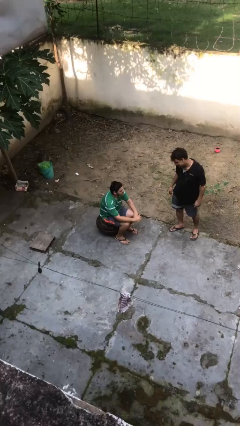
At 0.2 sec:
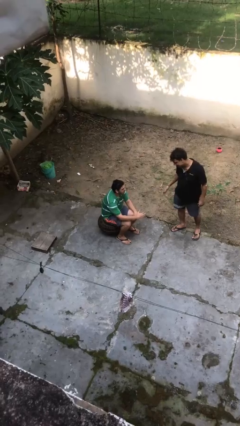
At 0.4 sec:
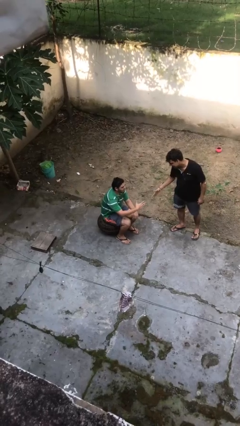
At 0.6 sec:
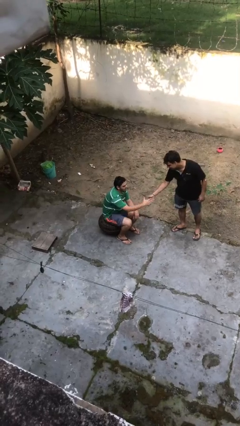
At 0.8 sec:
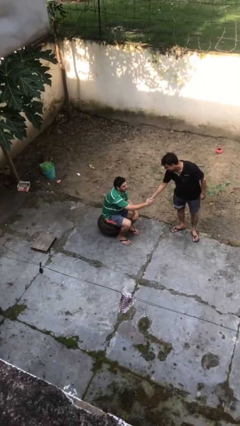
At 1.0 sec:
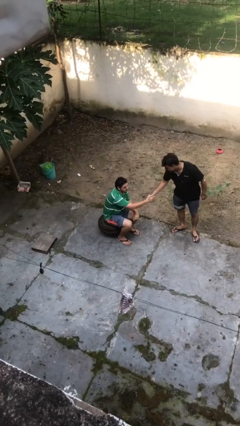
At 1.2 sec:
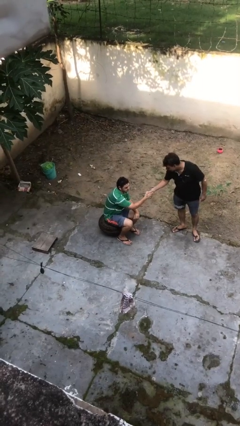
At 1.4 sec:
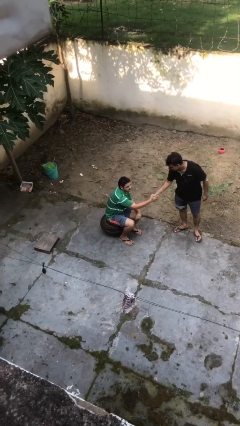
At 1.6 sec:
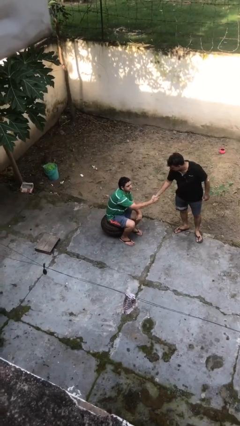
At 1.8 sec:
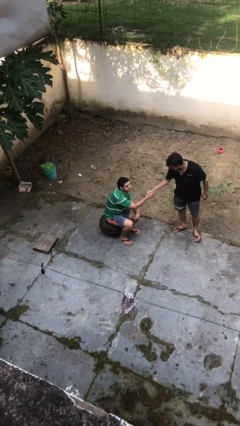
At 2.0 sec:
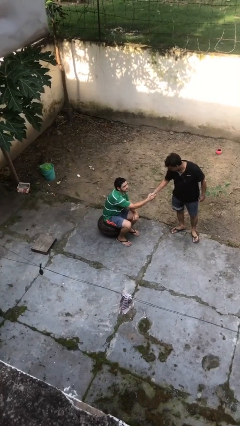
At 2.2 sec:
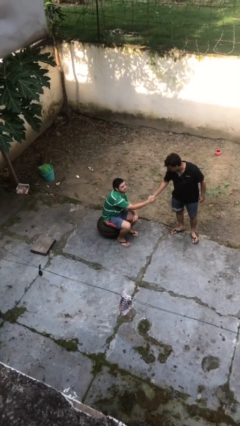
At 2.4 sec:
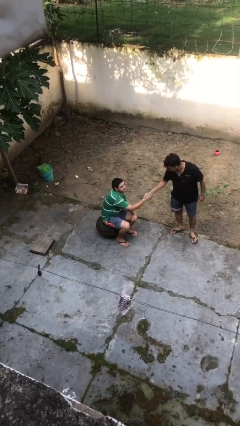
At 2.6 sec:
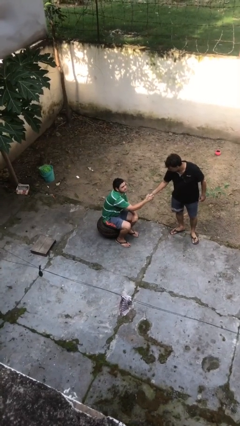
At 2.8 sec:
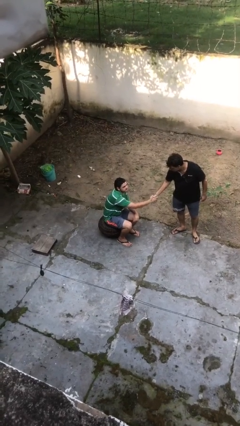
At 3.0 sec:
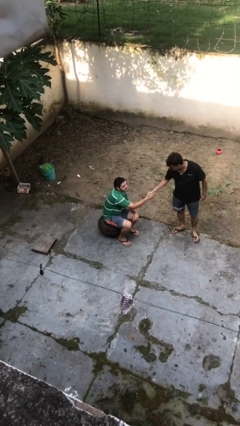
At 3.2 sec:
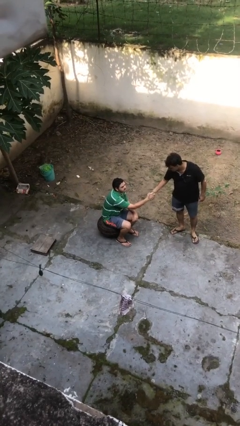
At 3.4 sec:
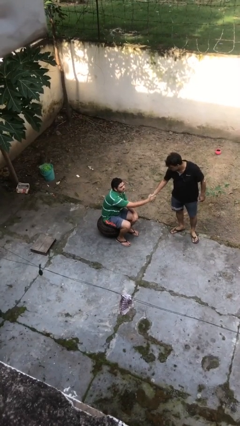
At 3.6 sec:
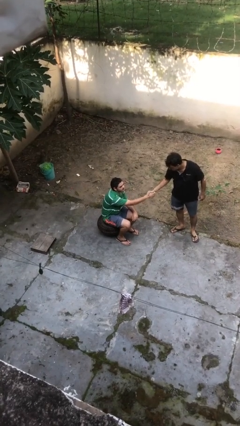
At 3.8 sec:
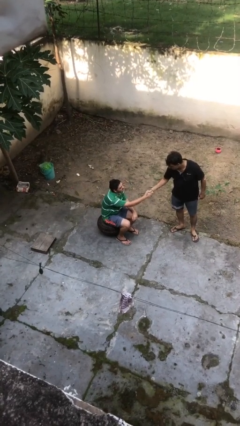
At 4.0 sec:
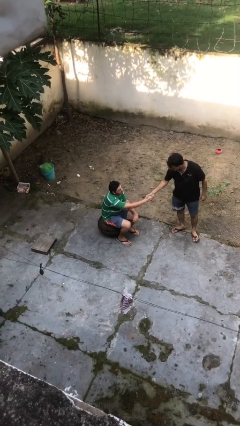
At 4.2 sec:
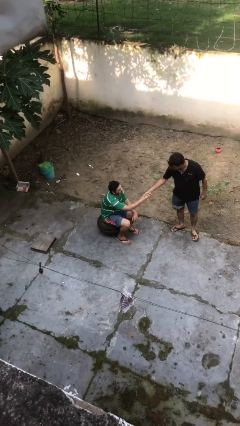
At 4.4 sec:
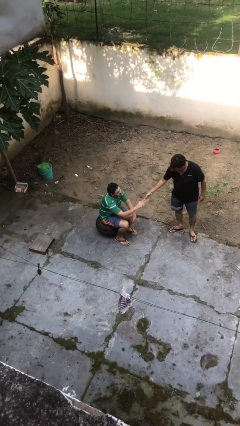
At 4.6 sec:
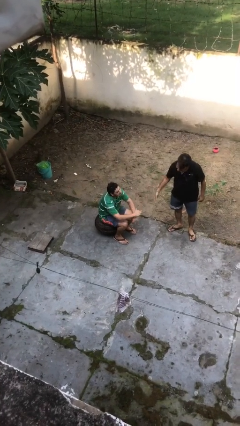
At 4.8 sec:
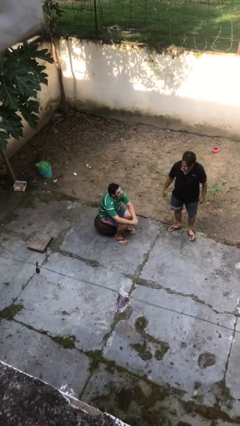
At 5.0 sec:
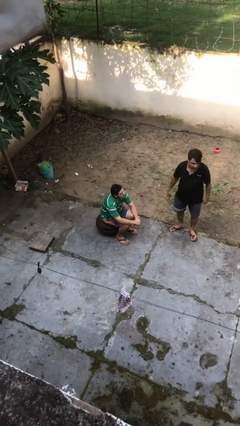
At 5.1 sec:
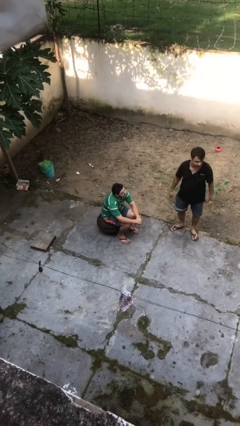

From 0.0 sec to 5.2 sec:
person shakes hand

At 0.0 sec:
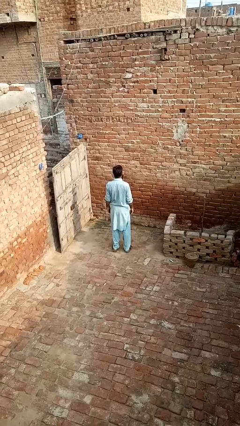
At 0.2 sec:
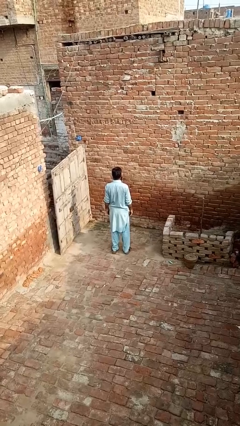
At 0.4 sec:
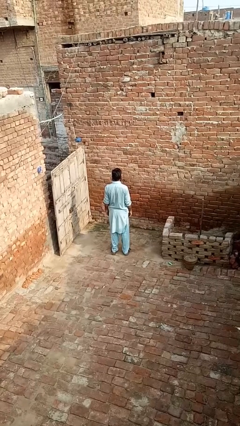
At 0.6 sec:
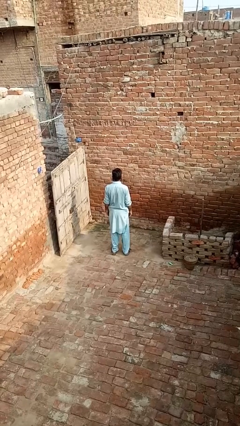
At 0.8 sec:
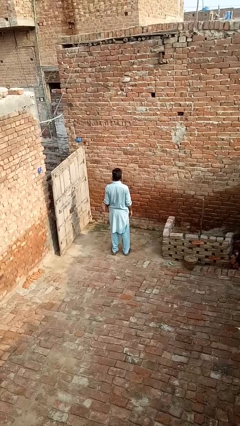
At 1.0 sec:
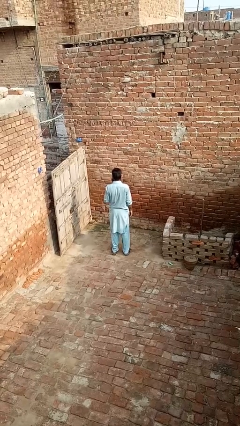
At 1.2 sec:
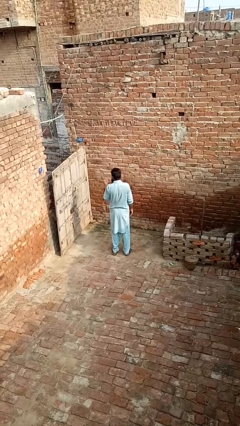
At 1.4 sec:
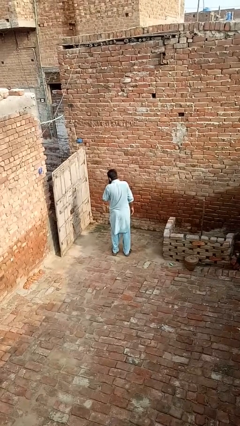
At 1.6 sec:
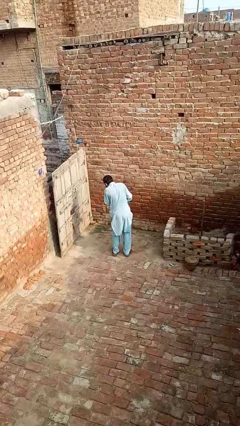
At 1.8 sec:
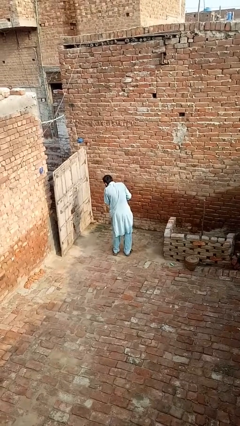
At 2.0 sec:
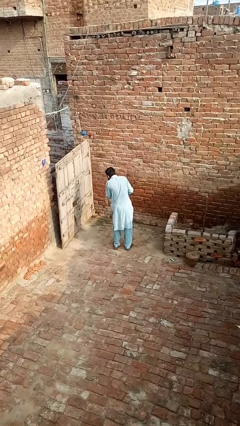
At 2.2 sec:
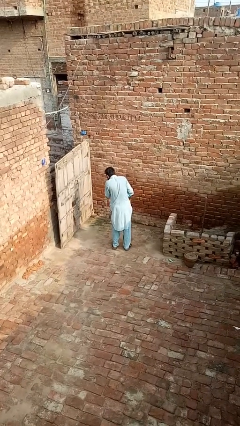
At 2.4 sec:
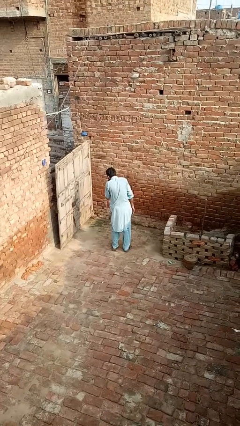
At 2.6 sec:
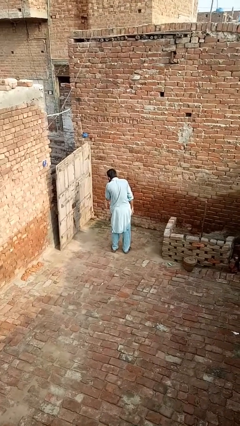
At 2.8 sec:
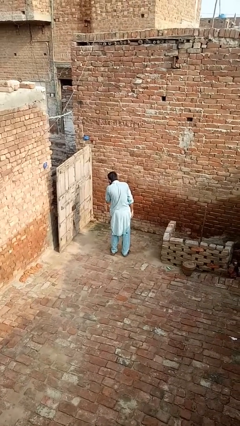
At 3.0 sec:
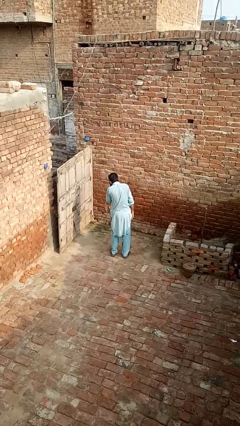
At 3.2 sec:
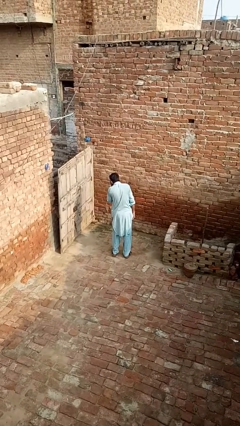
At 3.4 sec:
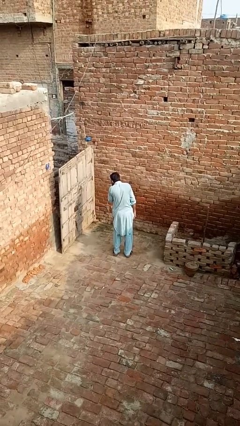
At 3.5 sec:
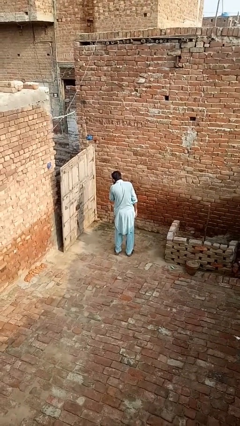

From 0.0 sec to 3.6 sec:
person sneezes into hand

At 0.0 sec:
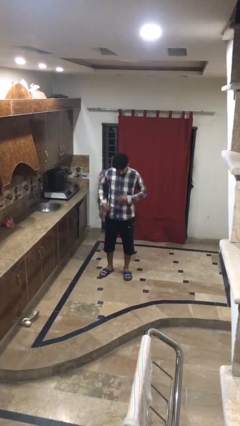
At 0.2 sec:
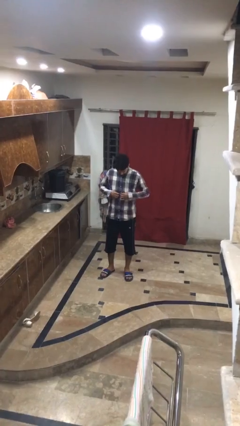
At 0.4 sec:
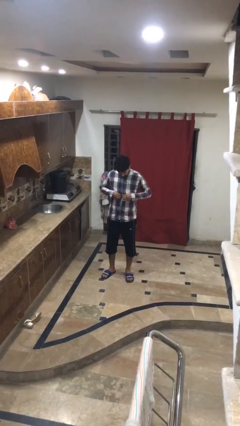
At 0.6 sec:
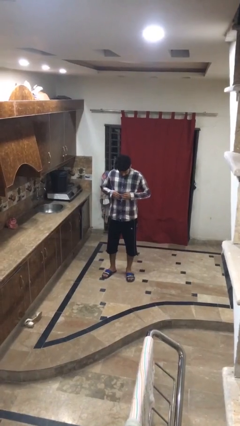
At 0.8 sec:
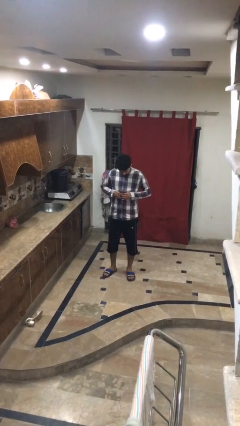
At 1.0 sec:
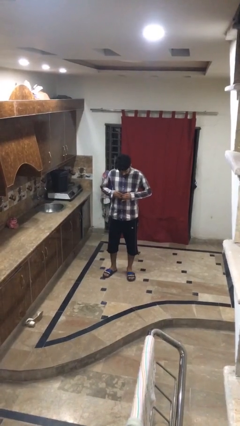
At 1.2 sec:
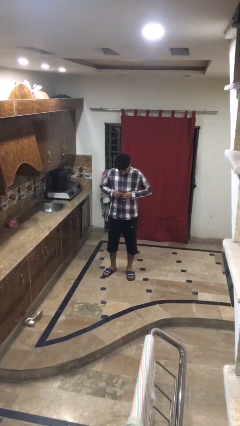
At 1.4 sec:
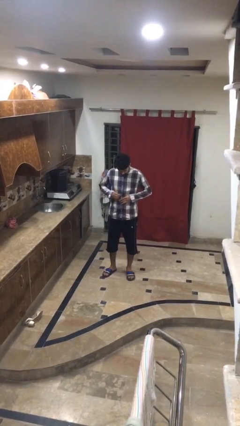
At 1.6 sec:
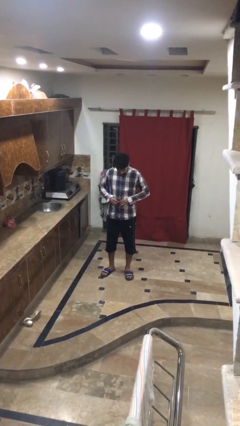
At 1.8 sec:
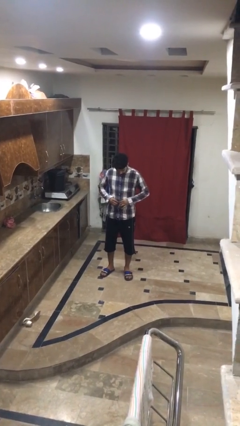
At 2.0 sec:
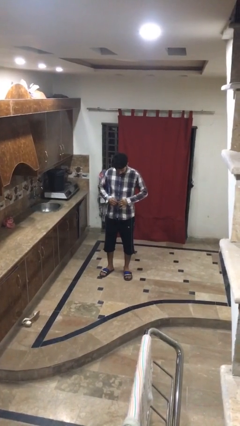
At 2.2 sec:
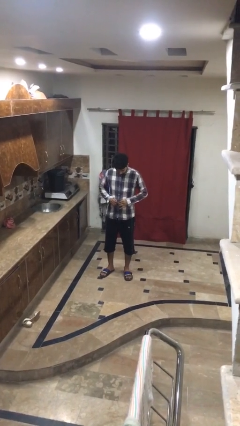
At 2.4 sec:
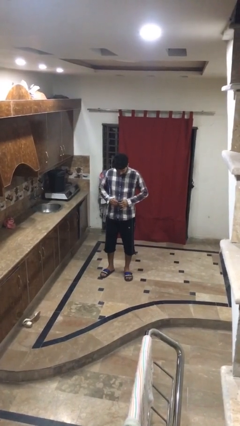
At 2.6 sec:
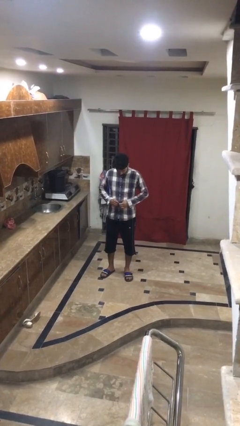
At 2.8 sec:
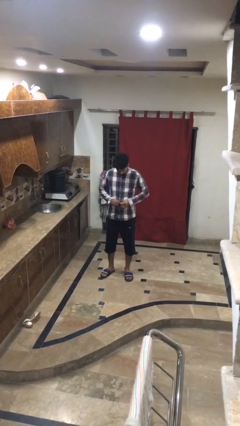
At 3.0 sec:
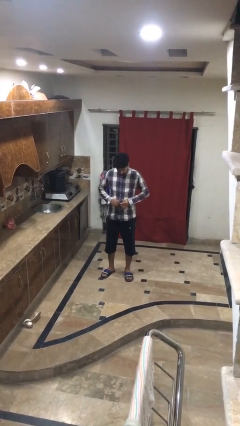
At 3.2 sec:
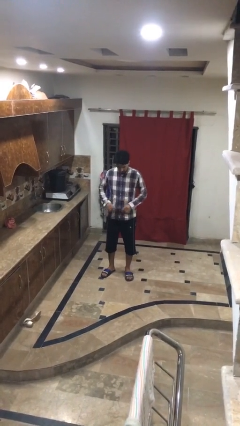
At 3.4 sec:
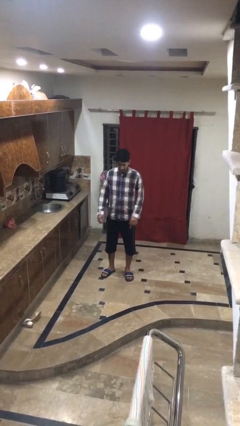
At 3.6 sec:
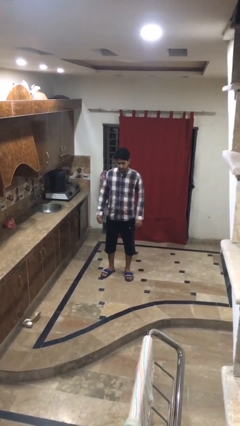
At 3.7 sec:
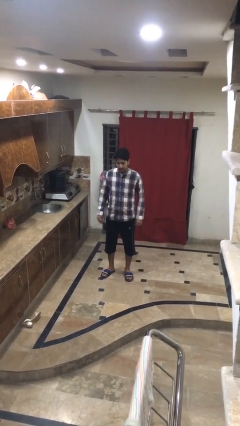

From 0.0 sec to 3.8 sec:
person buttons shirt

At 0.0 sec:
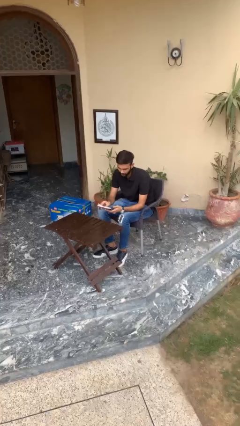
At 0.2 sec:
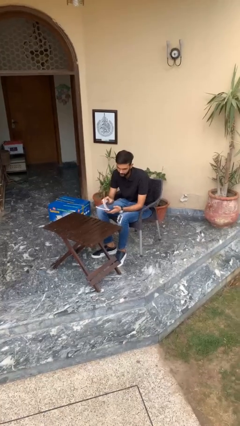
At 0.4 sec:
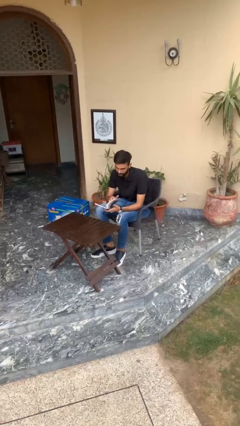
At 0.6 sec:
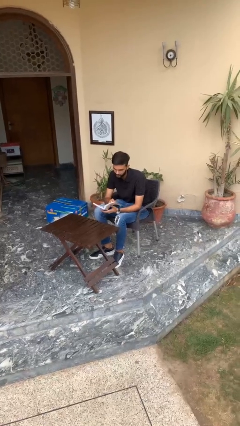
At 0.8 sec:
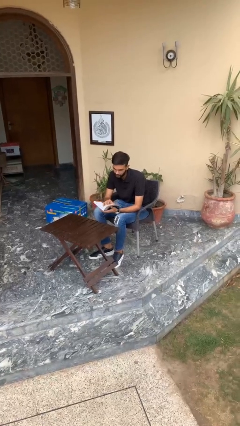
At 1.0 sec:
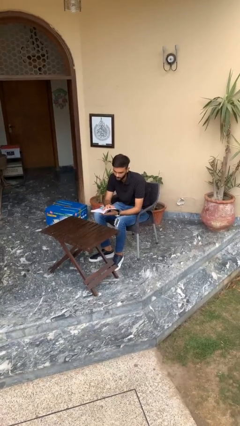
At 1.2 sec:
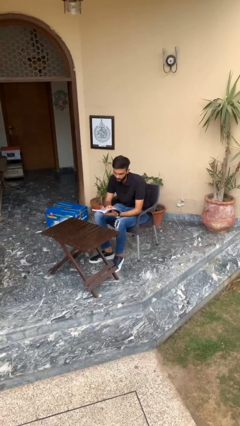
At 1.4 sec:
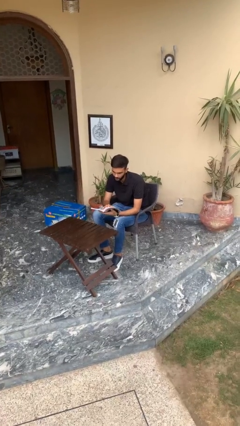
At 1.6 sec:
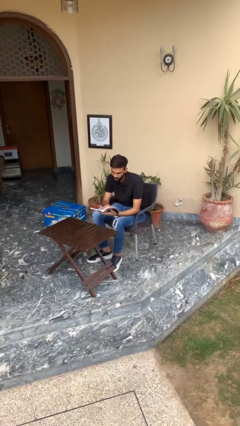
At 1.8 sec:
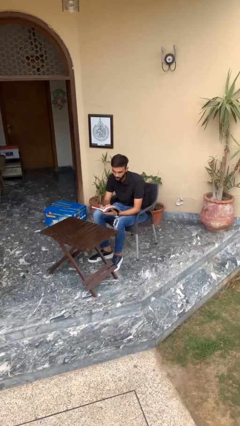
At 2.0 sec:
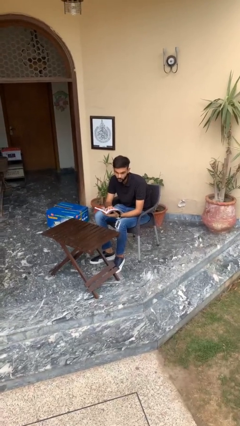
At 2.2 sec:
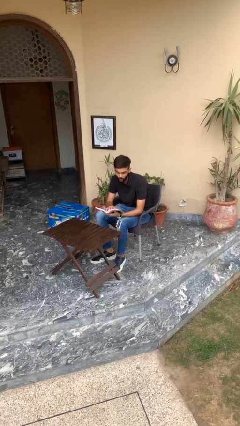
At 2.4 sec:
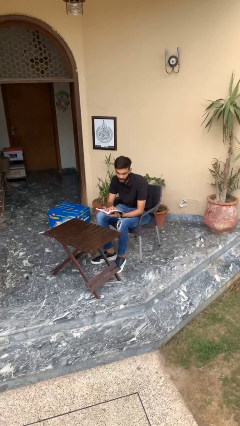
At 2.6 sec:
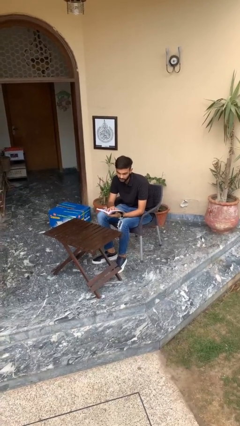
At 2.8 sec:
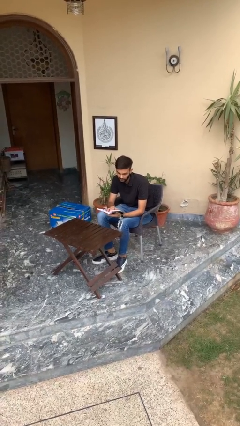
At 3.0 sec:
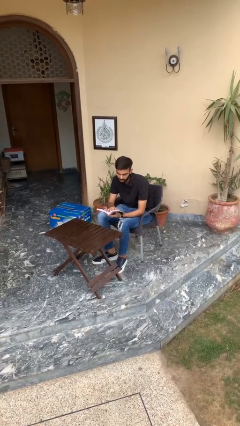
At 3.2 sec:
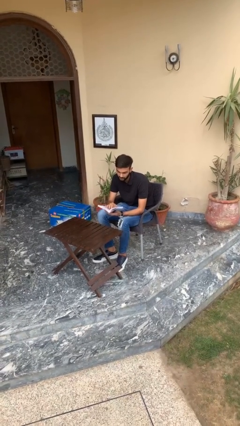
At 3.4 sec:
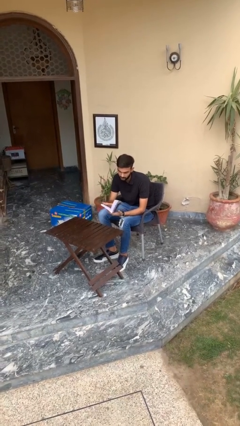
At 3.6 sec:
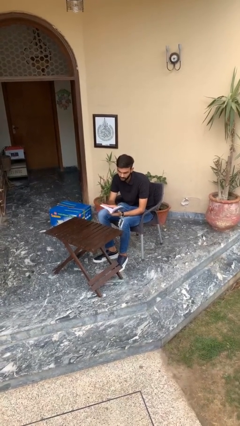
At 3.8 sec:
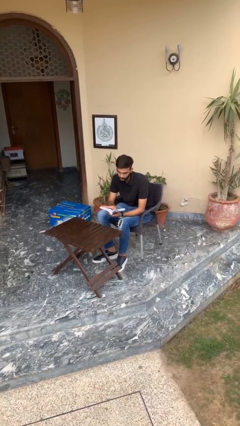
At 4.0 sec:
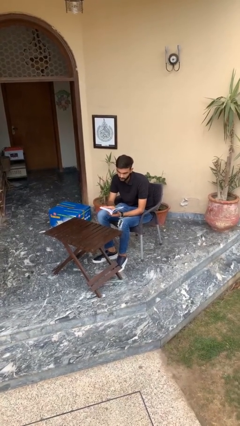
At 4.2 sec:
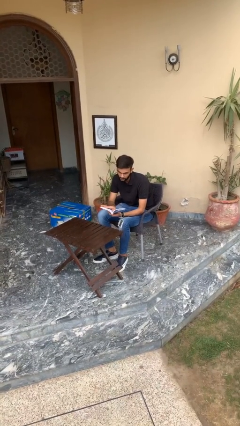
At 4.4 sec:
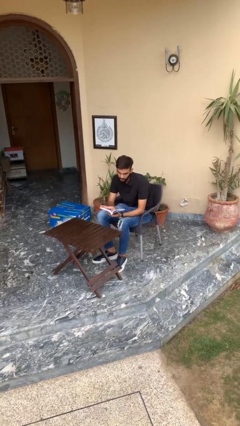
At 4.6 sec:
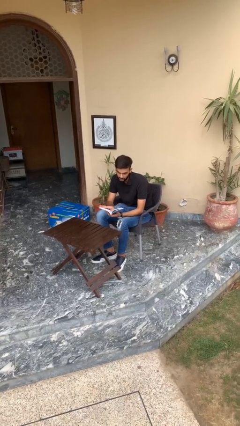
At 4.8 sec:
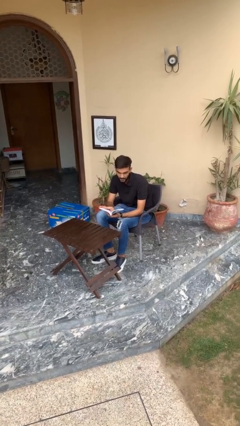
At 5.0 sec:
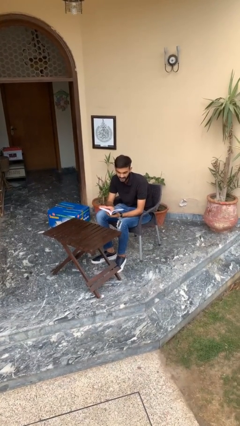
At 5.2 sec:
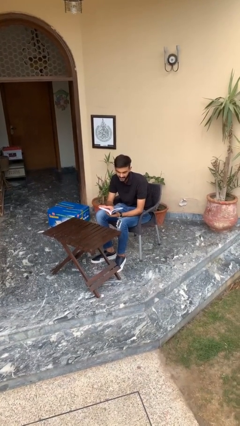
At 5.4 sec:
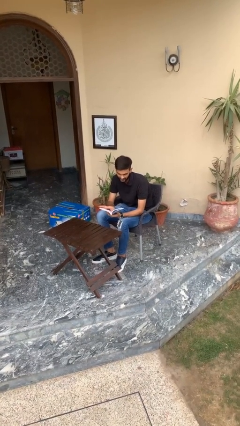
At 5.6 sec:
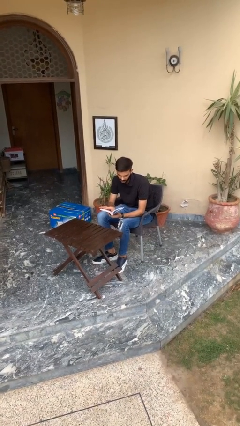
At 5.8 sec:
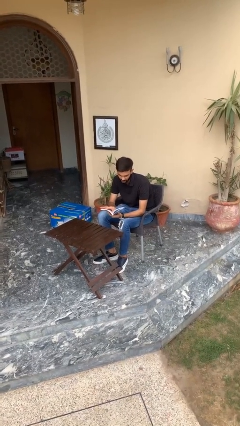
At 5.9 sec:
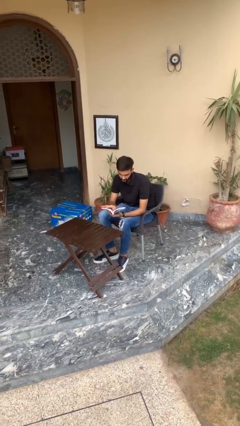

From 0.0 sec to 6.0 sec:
person reads document
